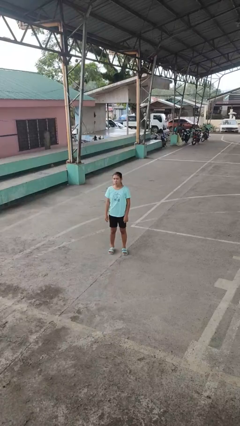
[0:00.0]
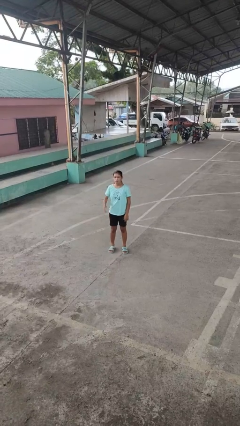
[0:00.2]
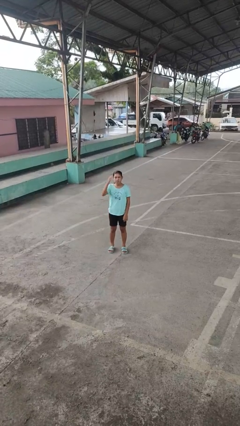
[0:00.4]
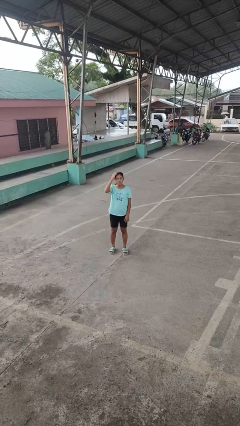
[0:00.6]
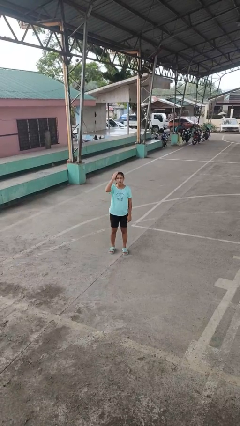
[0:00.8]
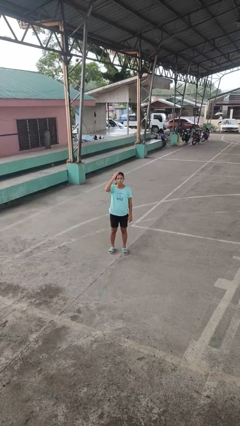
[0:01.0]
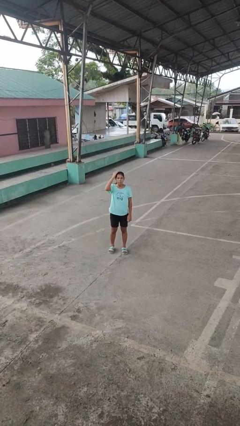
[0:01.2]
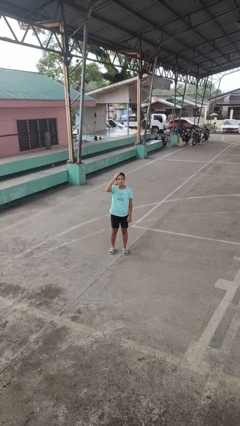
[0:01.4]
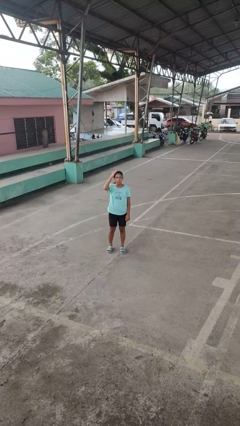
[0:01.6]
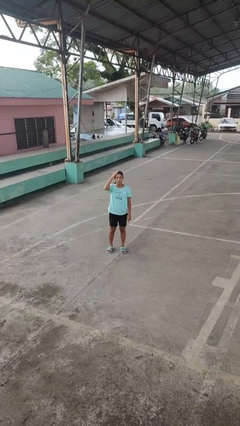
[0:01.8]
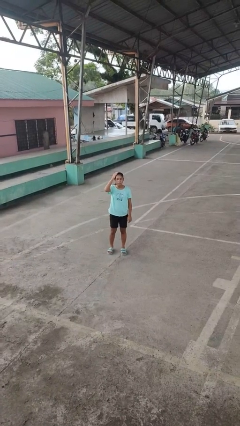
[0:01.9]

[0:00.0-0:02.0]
person pats head

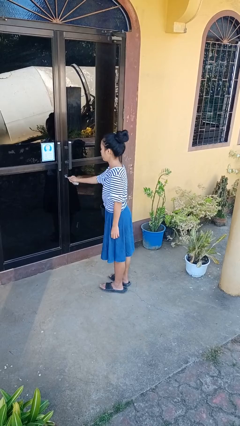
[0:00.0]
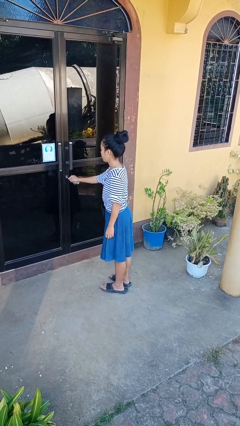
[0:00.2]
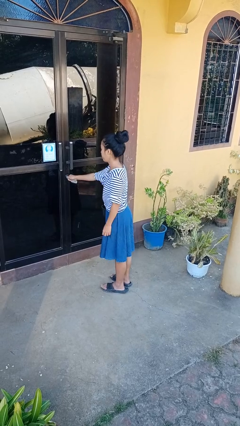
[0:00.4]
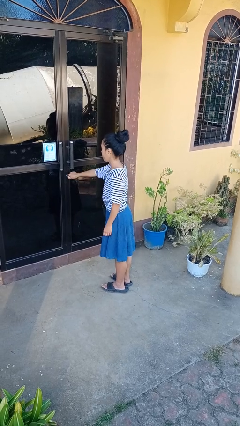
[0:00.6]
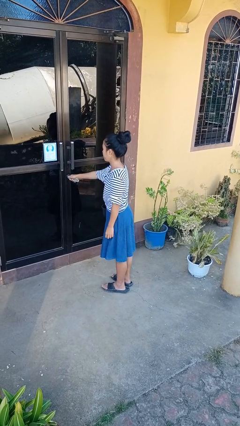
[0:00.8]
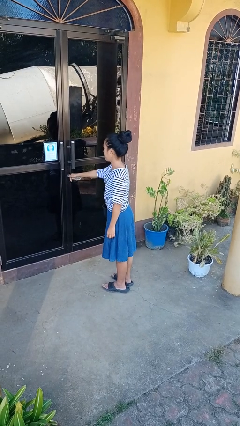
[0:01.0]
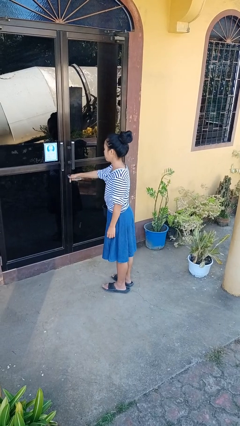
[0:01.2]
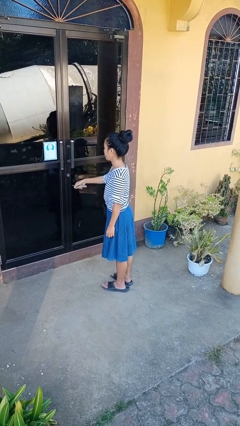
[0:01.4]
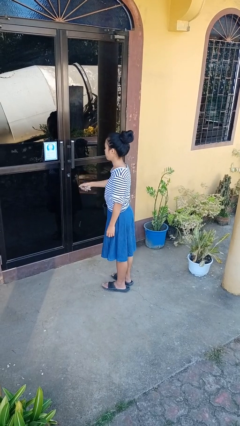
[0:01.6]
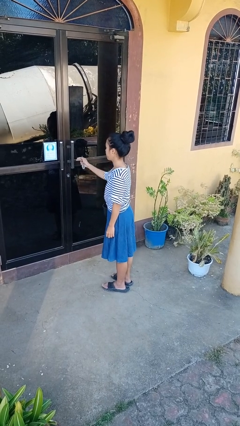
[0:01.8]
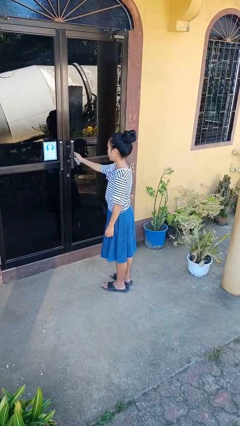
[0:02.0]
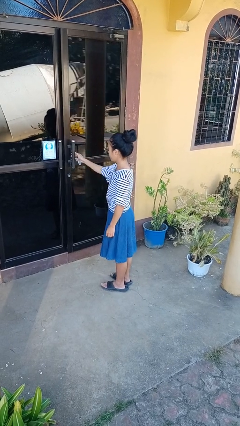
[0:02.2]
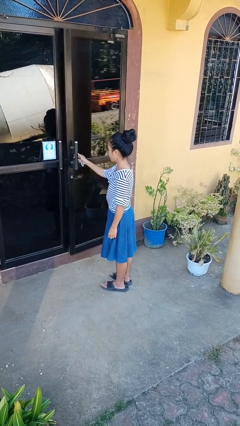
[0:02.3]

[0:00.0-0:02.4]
person unlocks door with keys

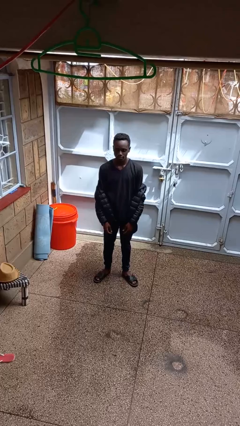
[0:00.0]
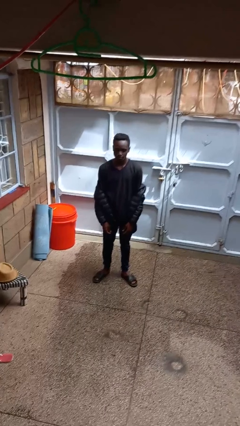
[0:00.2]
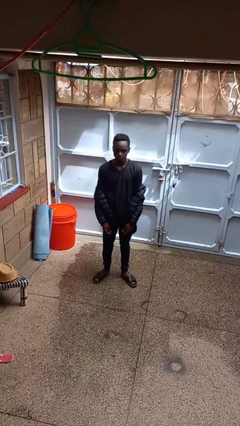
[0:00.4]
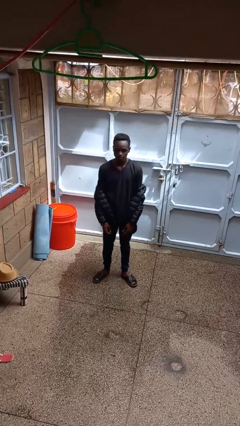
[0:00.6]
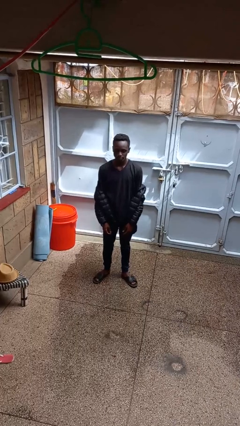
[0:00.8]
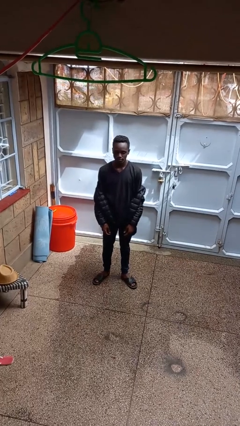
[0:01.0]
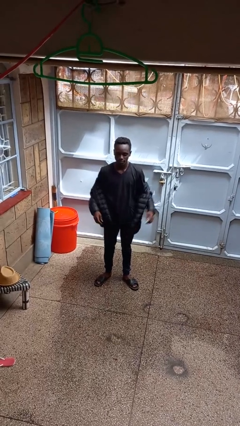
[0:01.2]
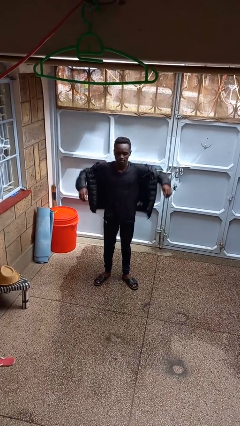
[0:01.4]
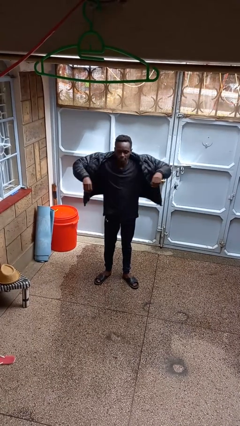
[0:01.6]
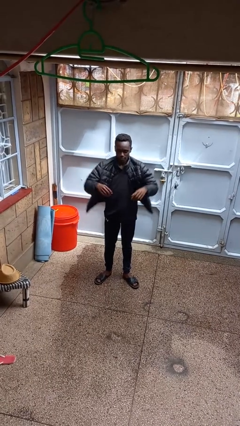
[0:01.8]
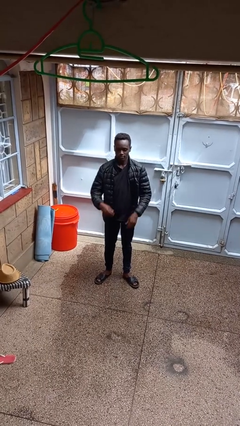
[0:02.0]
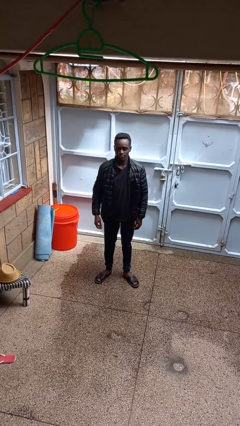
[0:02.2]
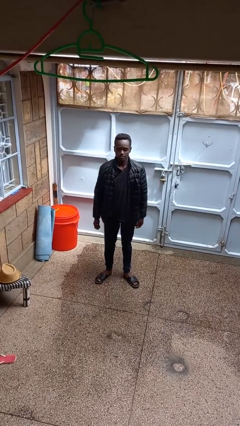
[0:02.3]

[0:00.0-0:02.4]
person puts on jacket

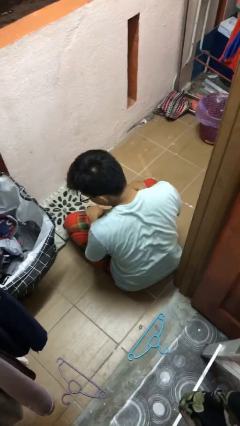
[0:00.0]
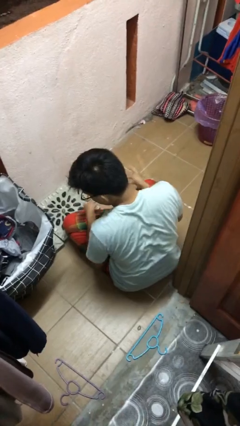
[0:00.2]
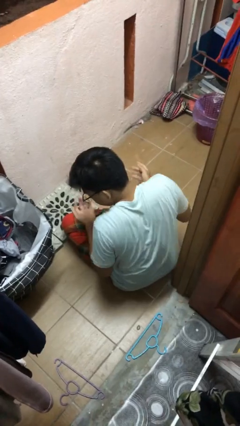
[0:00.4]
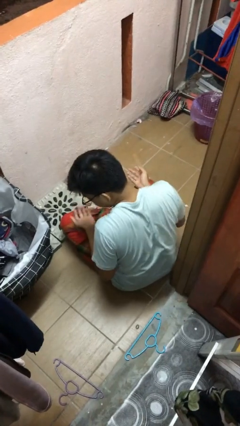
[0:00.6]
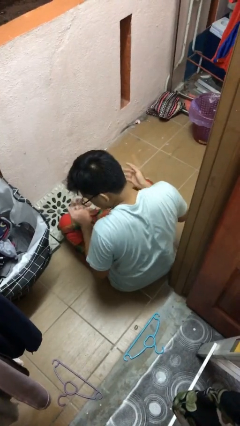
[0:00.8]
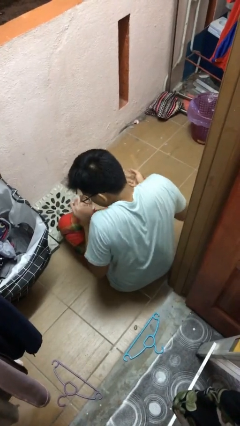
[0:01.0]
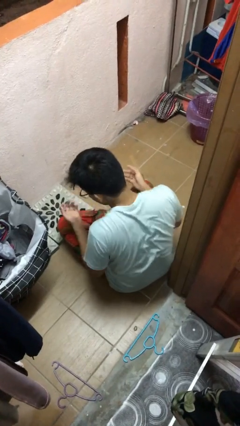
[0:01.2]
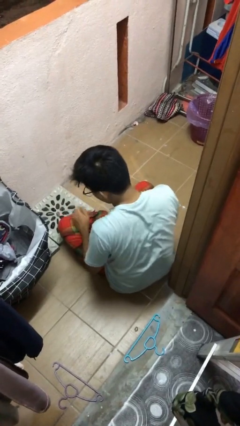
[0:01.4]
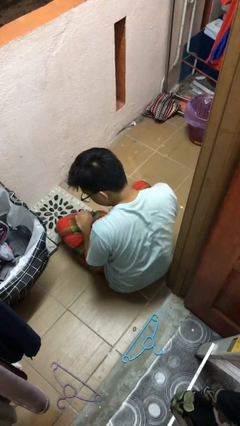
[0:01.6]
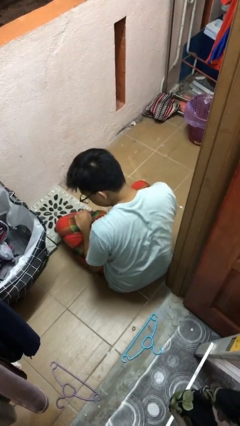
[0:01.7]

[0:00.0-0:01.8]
person shrugs

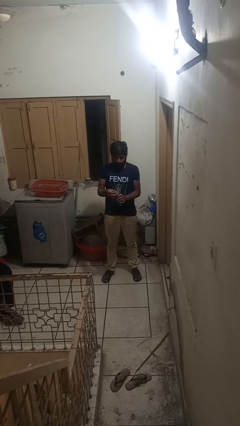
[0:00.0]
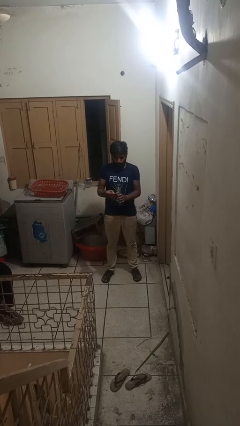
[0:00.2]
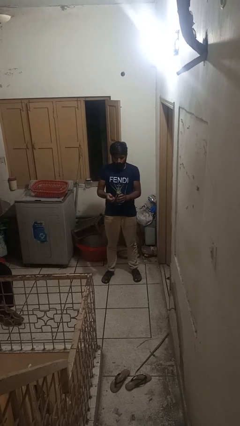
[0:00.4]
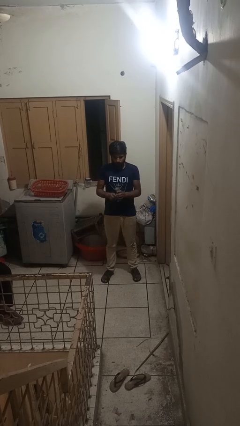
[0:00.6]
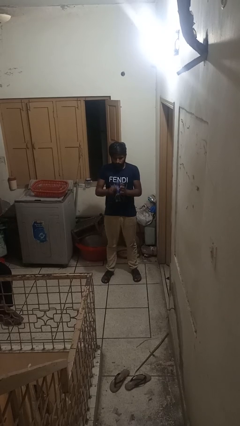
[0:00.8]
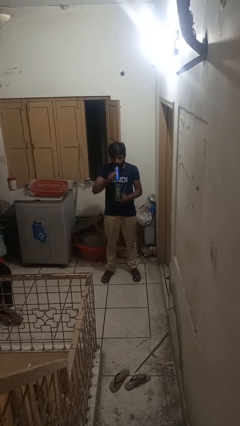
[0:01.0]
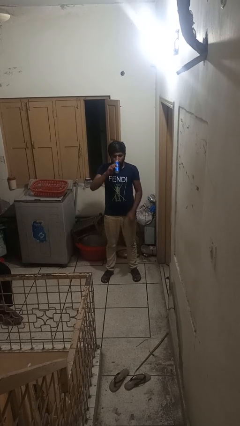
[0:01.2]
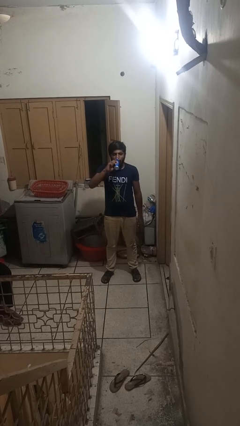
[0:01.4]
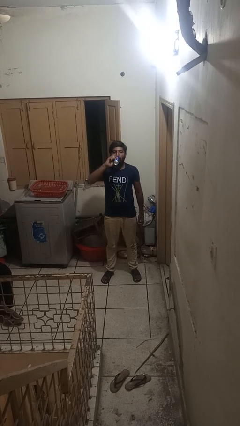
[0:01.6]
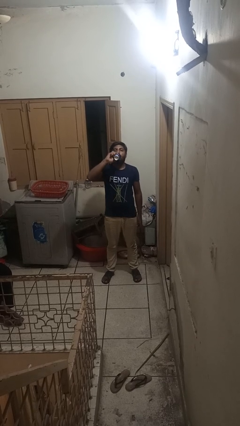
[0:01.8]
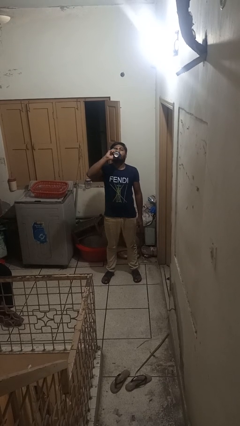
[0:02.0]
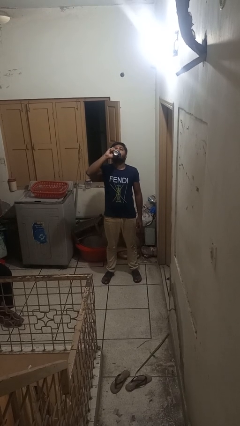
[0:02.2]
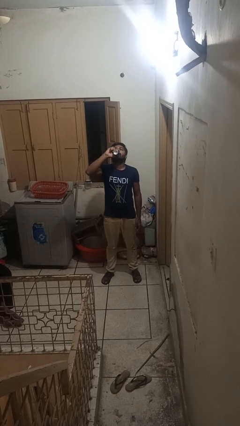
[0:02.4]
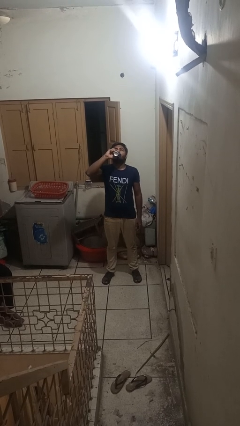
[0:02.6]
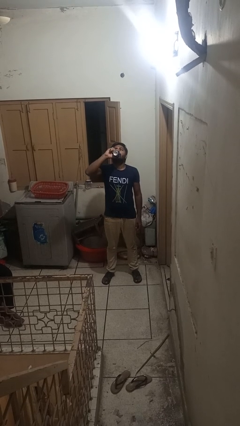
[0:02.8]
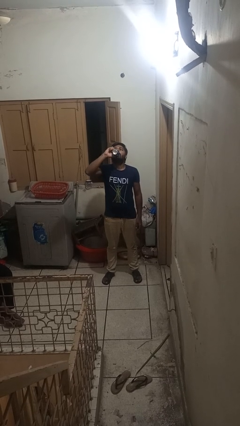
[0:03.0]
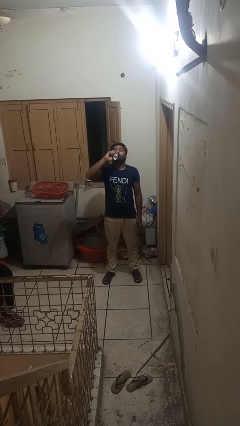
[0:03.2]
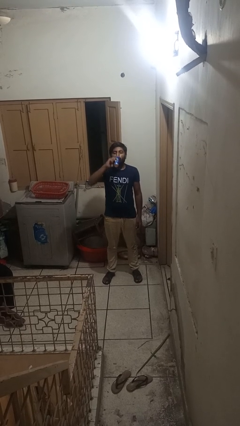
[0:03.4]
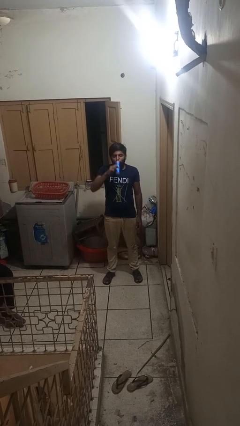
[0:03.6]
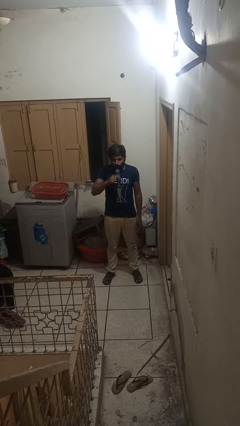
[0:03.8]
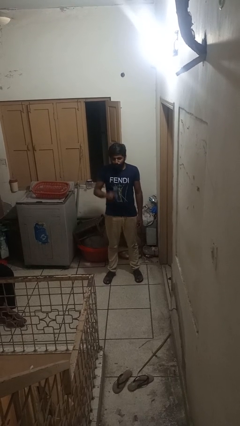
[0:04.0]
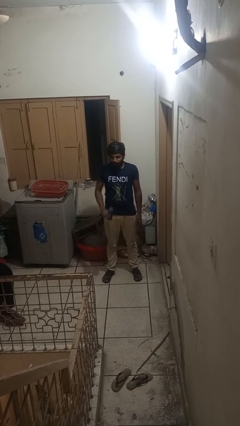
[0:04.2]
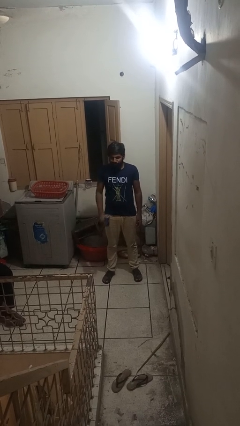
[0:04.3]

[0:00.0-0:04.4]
person drinks from beverage can

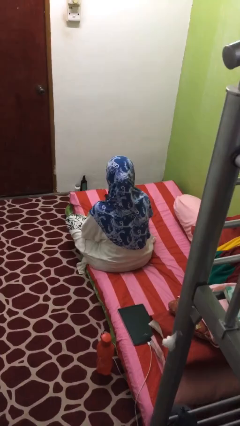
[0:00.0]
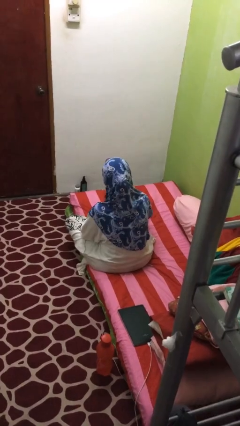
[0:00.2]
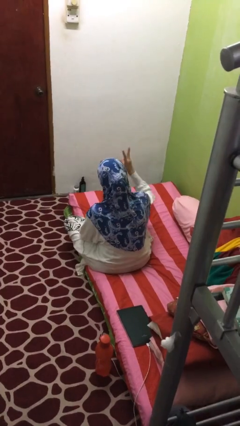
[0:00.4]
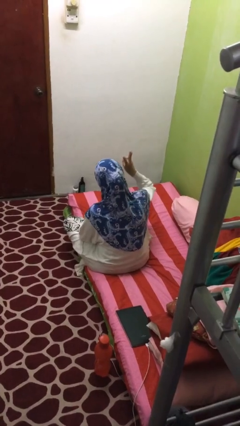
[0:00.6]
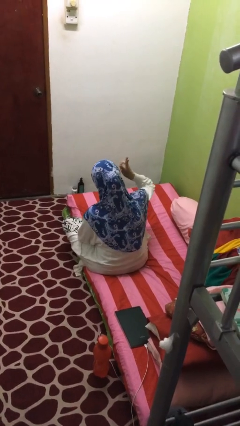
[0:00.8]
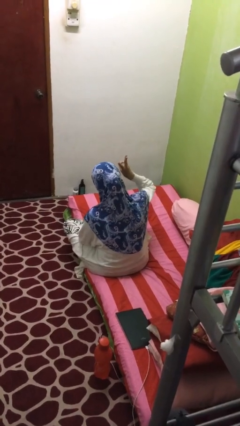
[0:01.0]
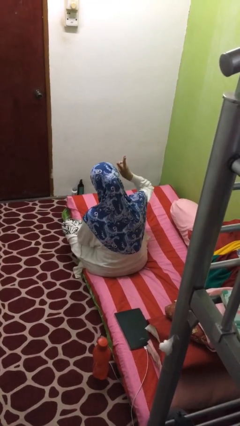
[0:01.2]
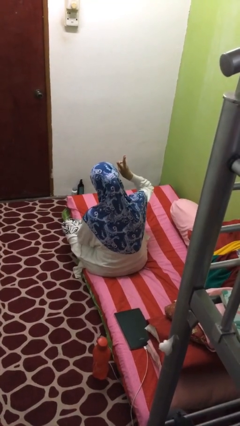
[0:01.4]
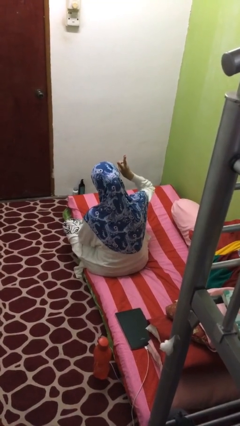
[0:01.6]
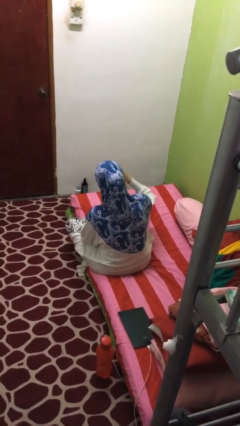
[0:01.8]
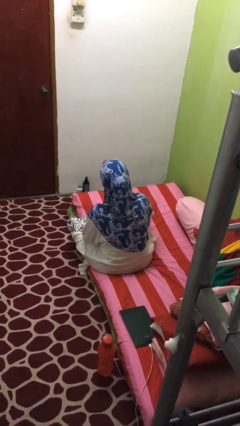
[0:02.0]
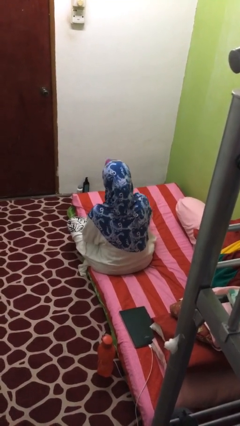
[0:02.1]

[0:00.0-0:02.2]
person gestures number three

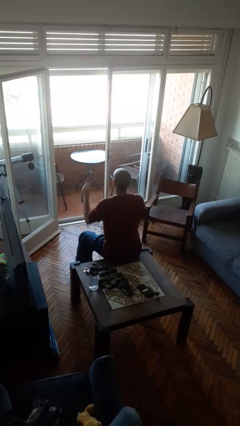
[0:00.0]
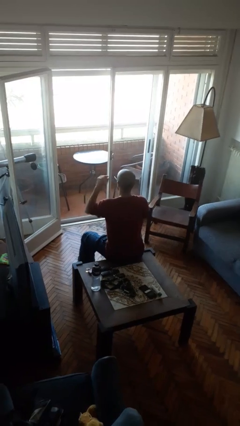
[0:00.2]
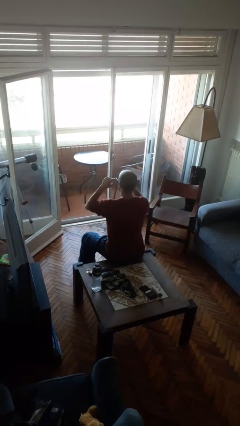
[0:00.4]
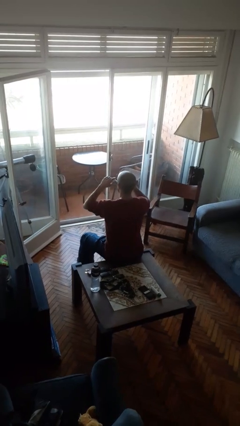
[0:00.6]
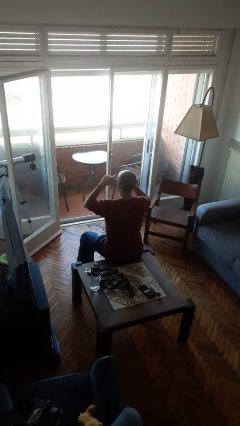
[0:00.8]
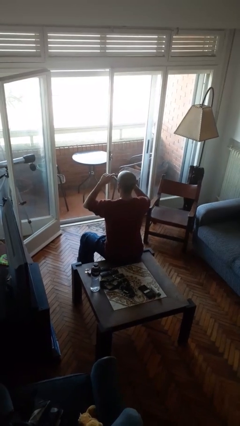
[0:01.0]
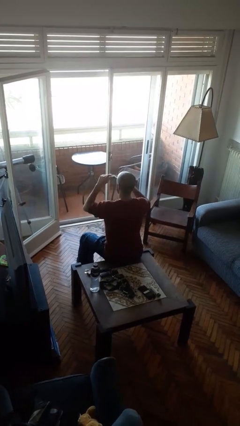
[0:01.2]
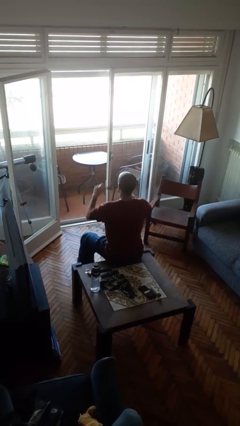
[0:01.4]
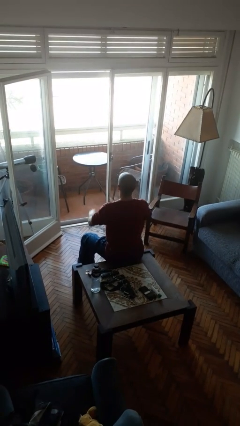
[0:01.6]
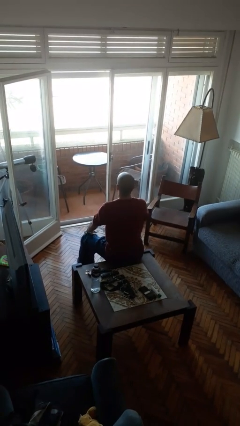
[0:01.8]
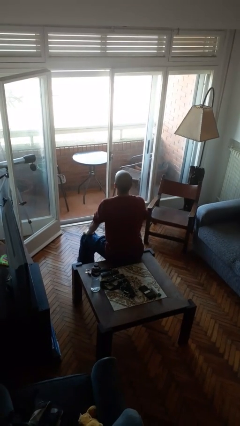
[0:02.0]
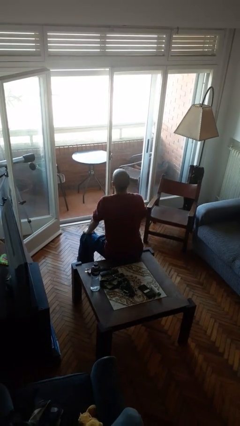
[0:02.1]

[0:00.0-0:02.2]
person takes off sunglasses
